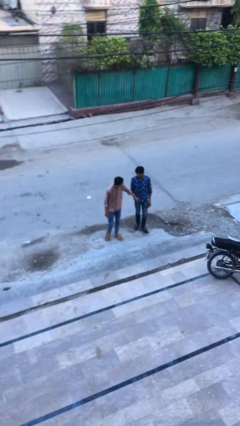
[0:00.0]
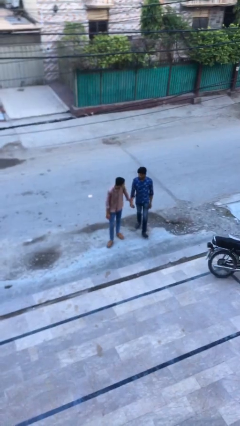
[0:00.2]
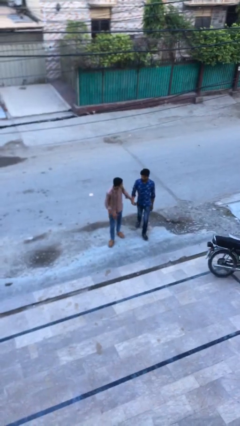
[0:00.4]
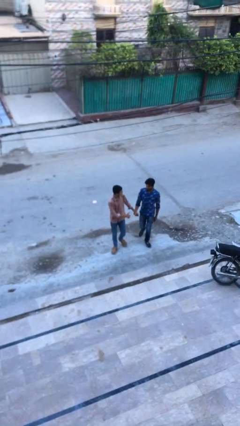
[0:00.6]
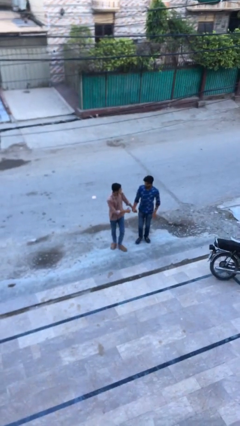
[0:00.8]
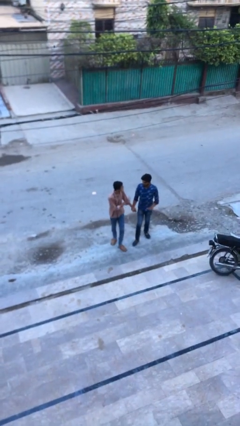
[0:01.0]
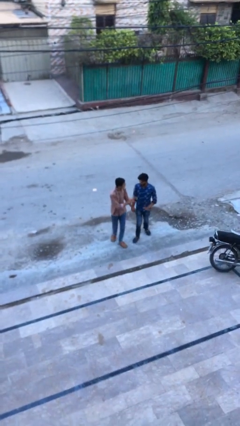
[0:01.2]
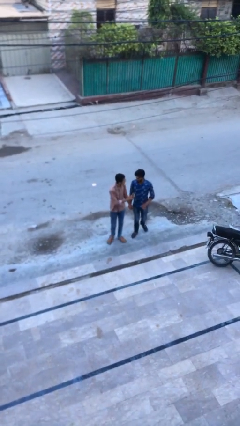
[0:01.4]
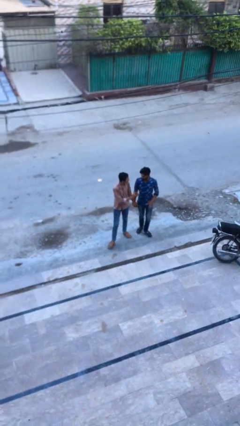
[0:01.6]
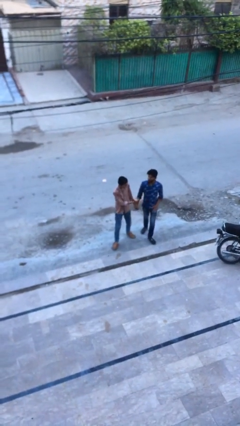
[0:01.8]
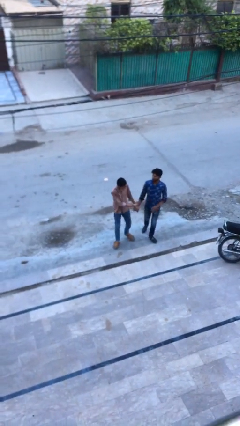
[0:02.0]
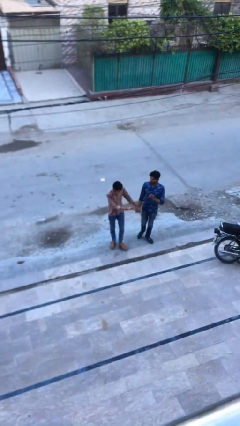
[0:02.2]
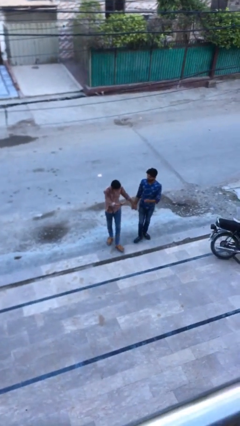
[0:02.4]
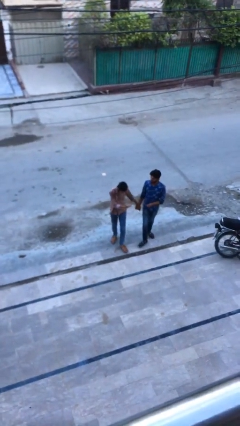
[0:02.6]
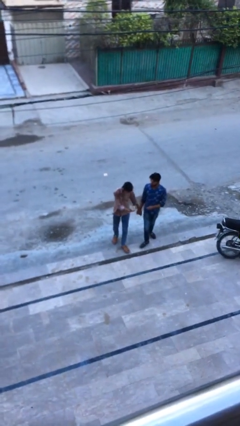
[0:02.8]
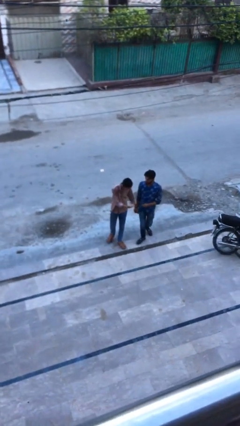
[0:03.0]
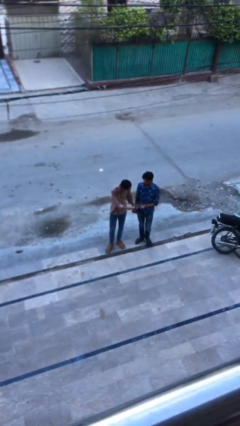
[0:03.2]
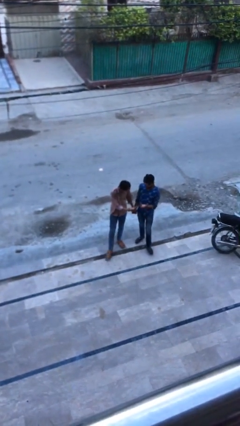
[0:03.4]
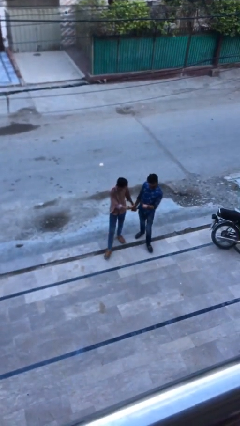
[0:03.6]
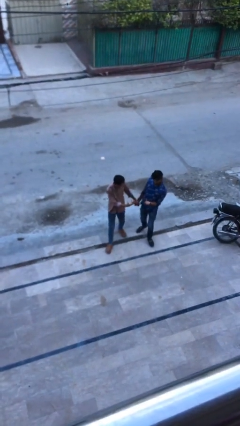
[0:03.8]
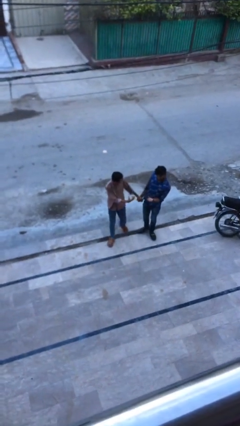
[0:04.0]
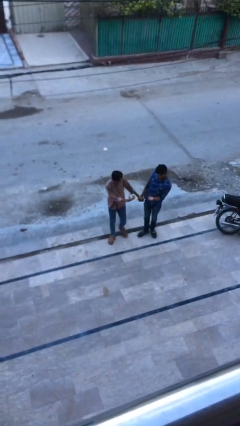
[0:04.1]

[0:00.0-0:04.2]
person holds hand

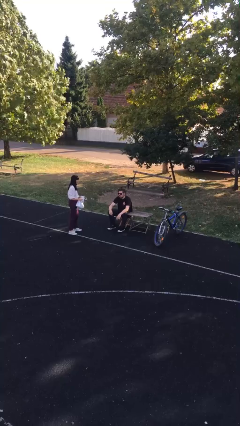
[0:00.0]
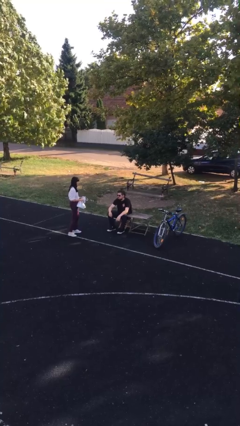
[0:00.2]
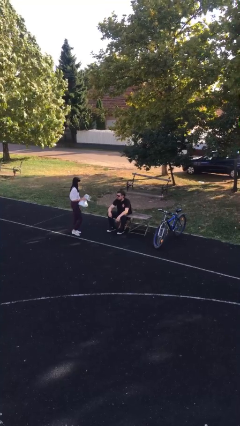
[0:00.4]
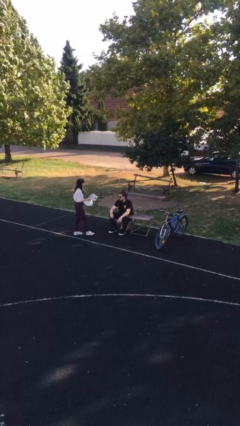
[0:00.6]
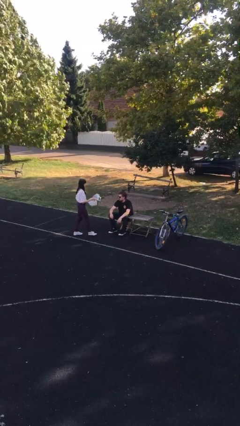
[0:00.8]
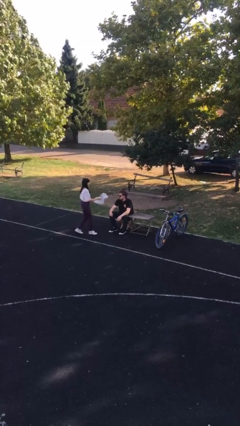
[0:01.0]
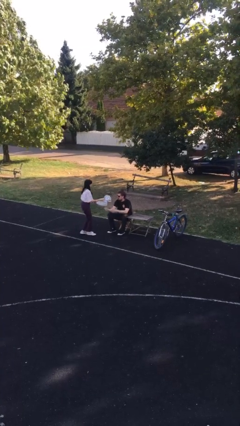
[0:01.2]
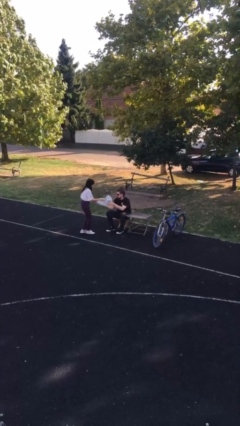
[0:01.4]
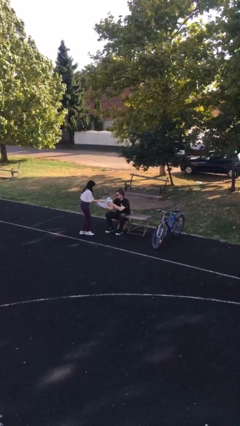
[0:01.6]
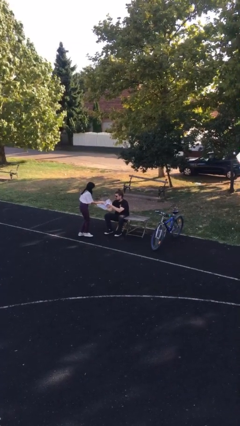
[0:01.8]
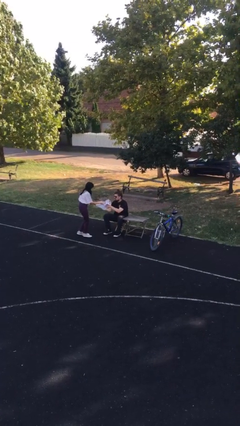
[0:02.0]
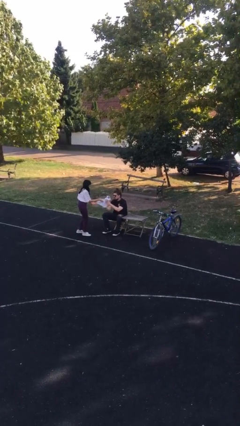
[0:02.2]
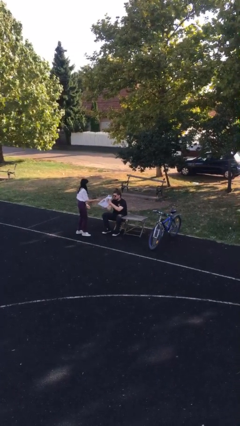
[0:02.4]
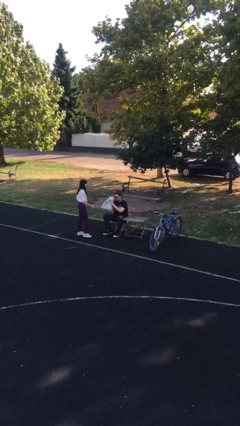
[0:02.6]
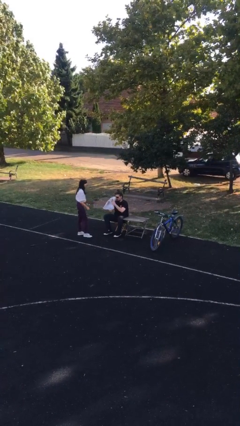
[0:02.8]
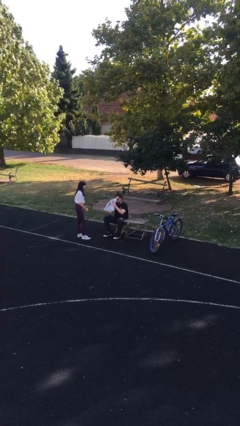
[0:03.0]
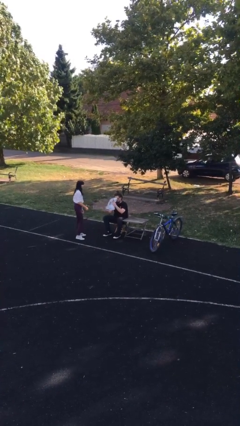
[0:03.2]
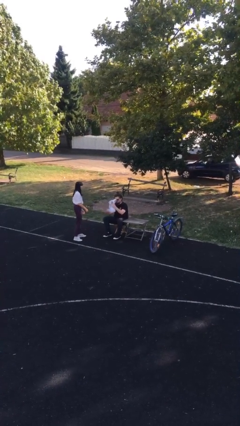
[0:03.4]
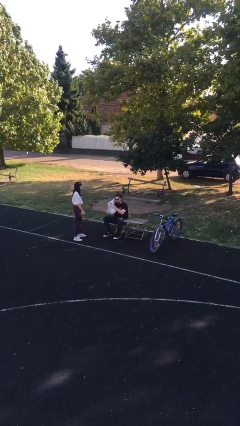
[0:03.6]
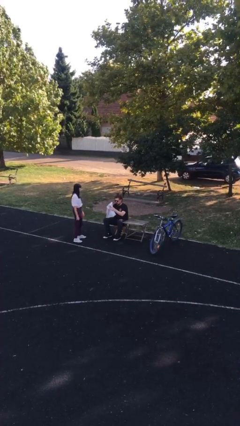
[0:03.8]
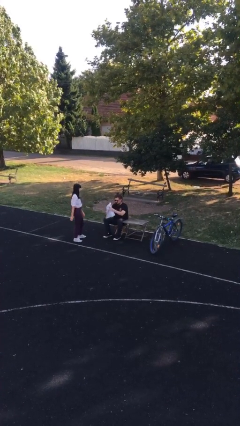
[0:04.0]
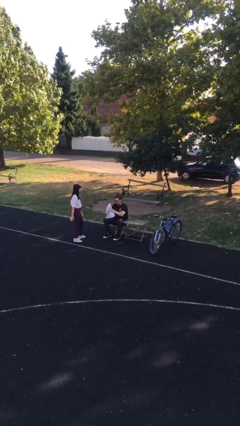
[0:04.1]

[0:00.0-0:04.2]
person transfers object to person

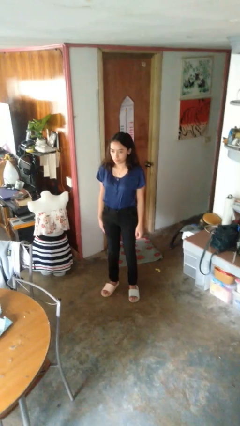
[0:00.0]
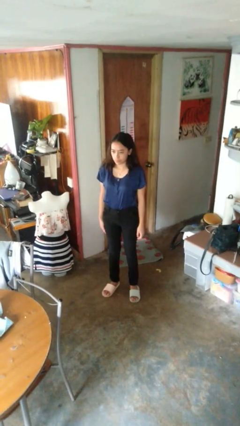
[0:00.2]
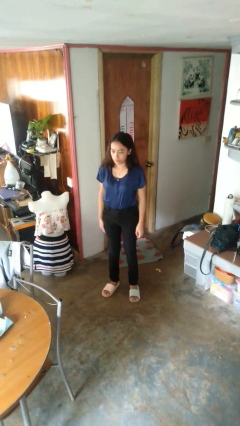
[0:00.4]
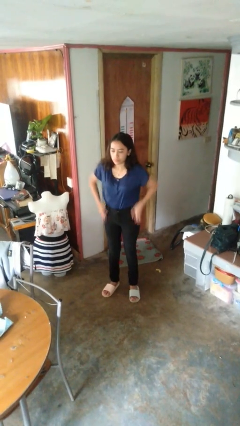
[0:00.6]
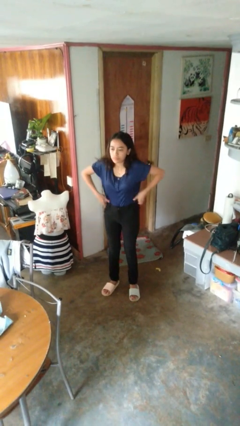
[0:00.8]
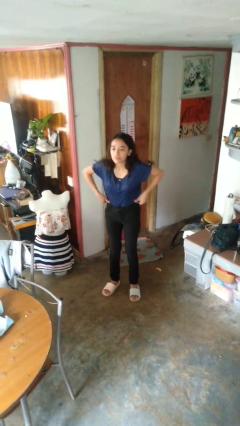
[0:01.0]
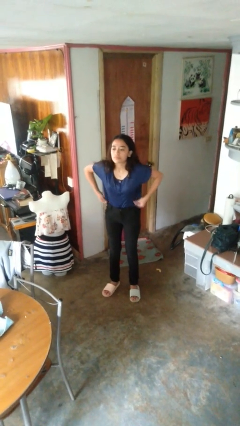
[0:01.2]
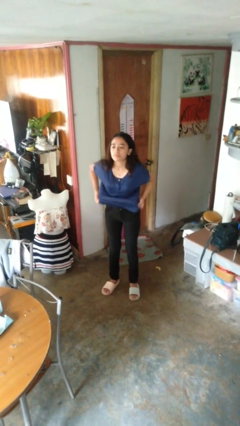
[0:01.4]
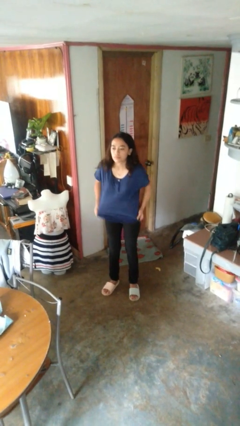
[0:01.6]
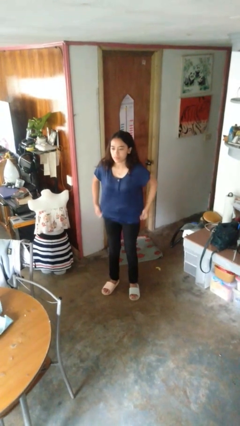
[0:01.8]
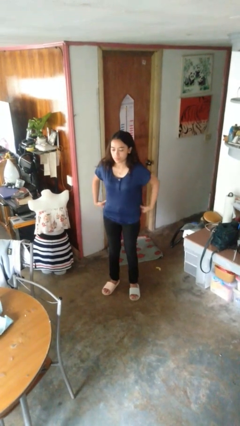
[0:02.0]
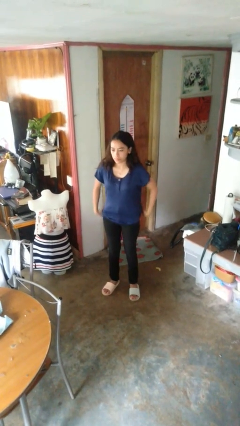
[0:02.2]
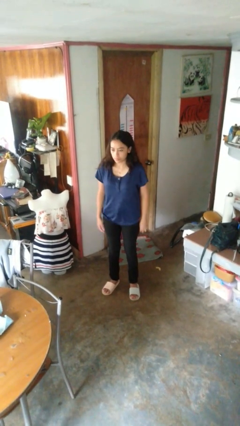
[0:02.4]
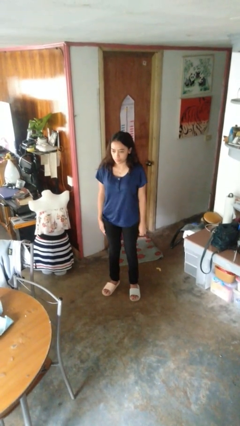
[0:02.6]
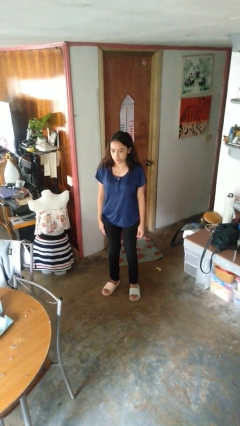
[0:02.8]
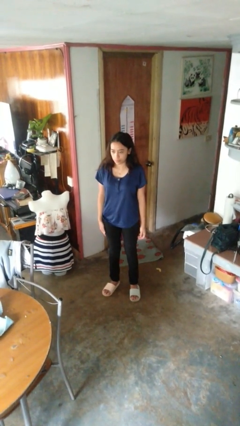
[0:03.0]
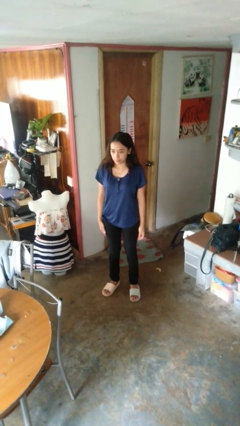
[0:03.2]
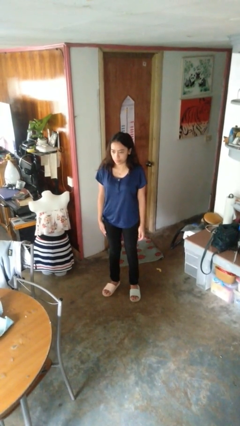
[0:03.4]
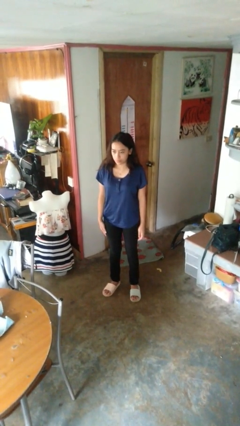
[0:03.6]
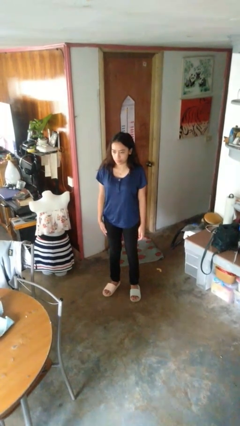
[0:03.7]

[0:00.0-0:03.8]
person untucks shirt

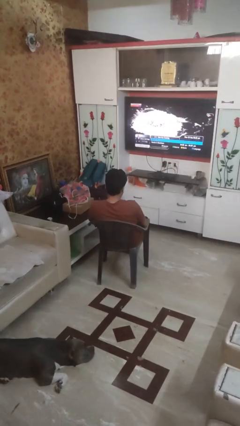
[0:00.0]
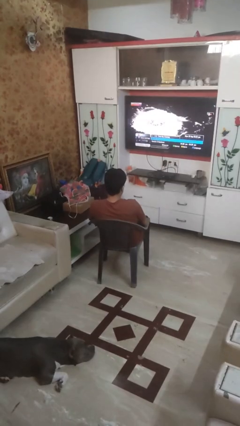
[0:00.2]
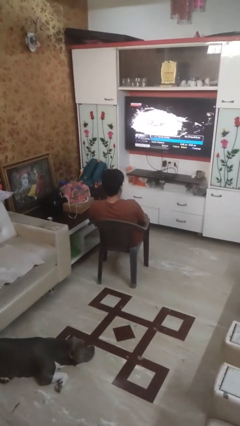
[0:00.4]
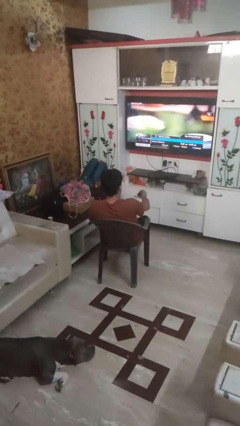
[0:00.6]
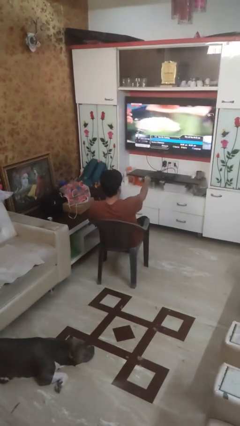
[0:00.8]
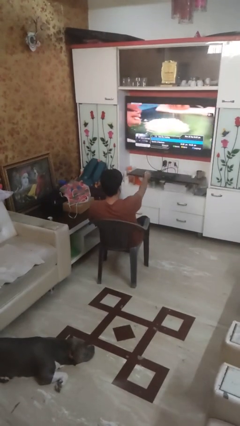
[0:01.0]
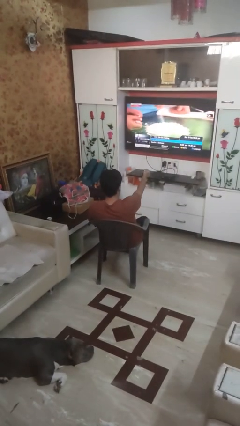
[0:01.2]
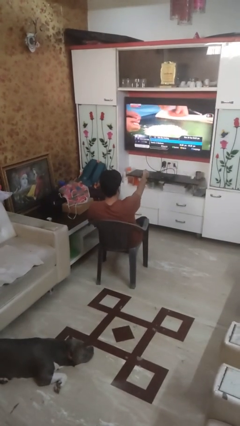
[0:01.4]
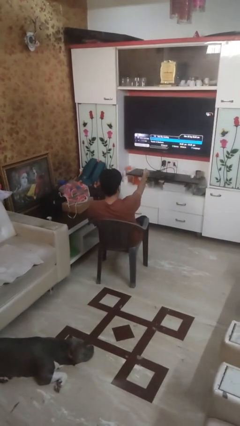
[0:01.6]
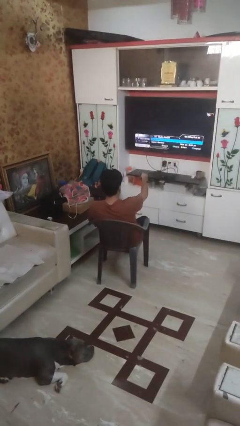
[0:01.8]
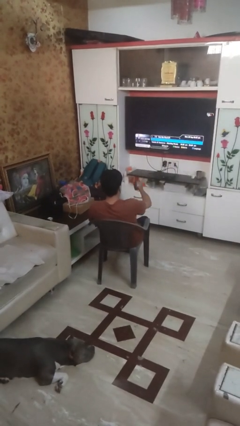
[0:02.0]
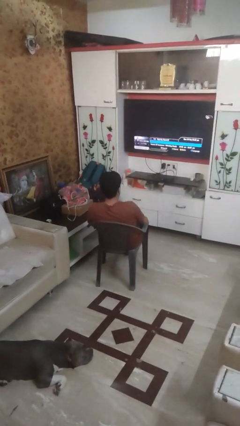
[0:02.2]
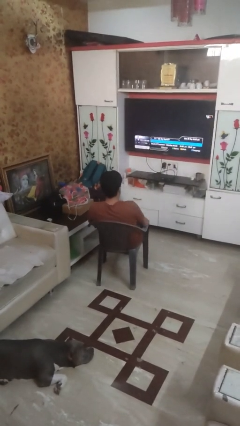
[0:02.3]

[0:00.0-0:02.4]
person uses television remote

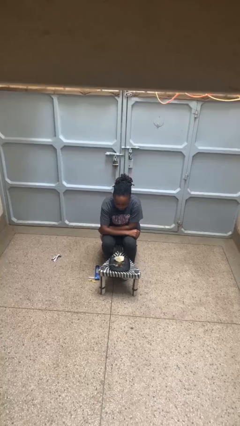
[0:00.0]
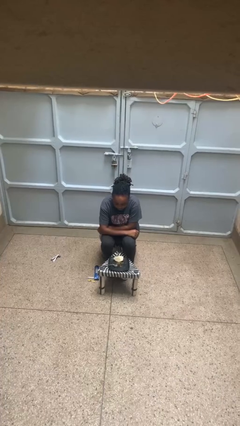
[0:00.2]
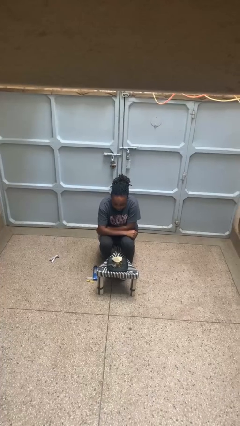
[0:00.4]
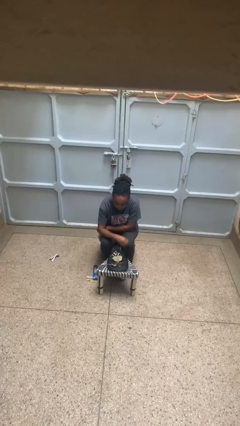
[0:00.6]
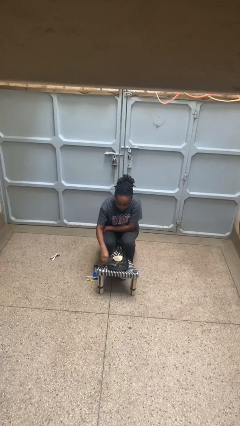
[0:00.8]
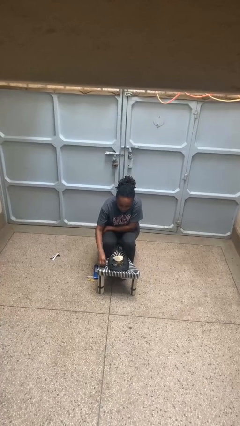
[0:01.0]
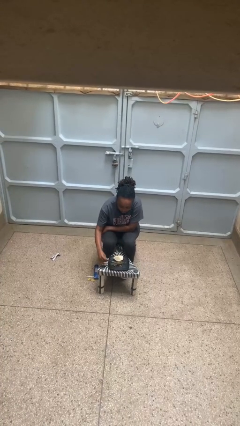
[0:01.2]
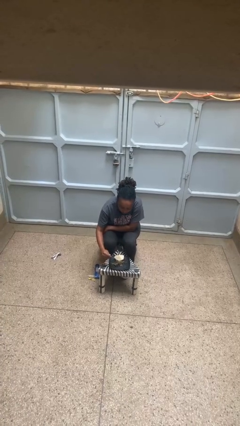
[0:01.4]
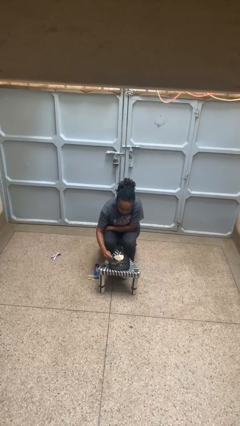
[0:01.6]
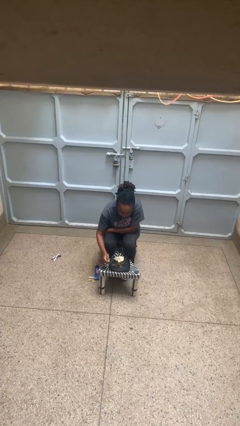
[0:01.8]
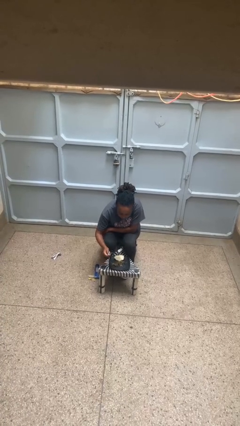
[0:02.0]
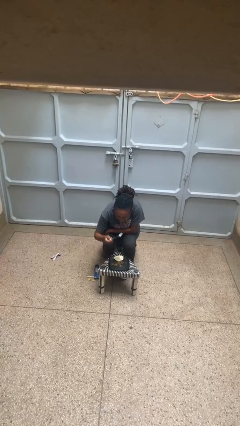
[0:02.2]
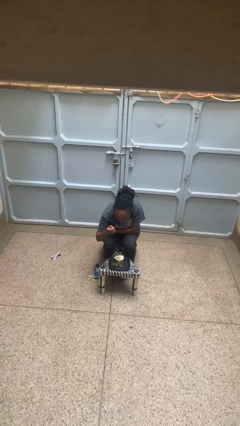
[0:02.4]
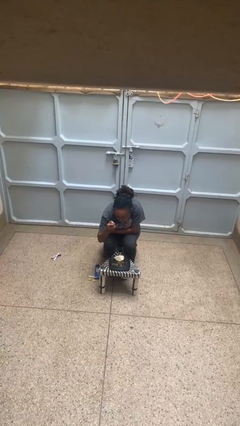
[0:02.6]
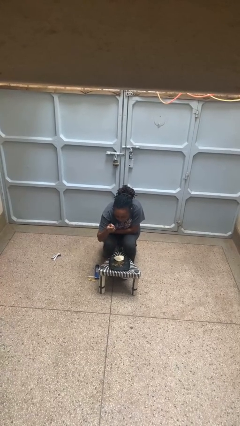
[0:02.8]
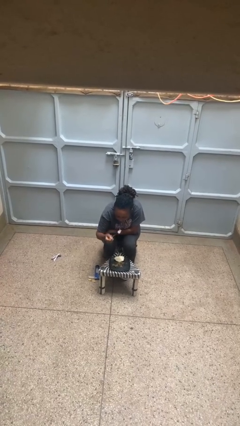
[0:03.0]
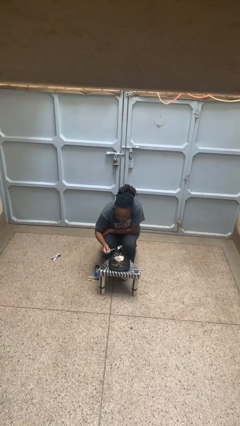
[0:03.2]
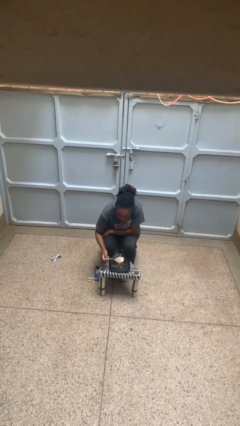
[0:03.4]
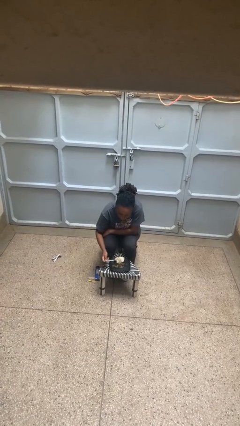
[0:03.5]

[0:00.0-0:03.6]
person eats with utensil
